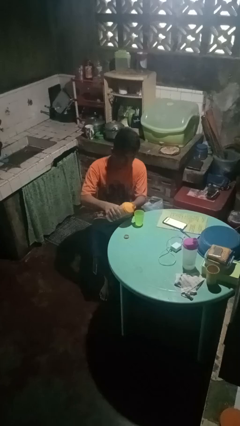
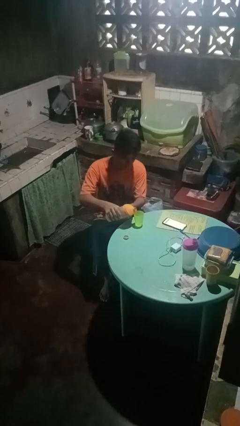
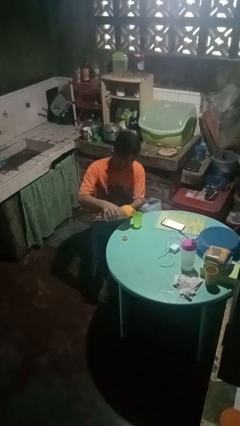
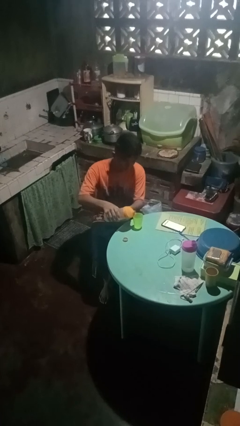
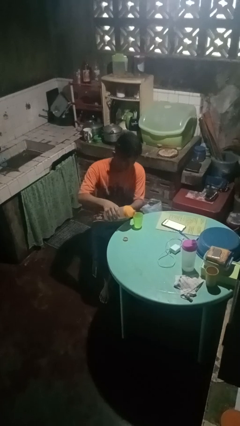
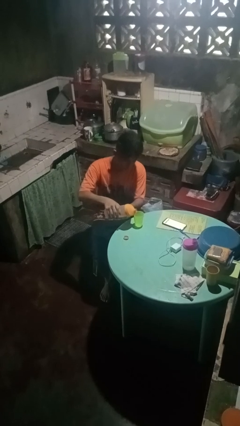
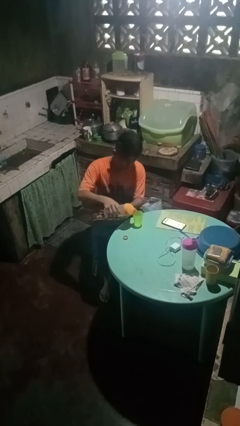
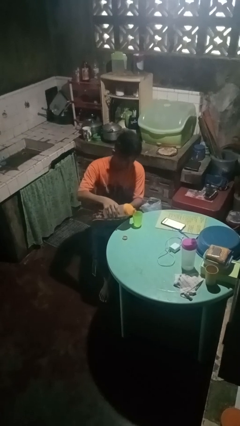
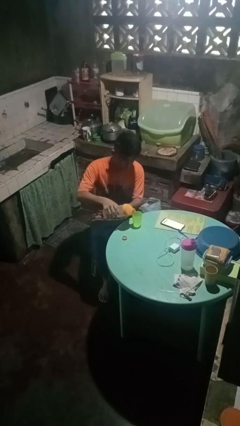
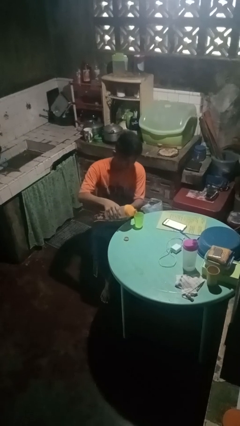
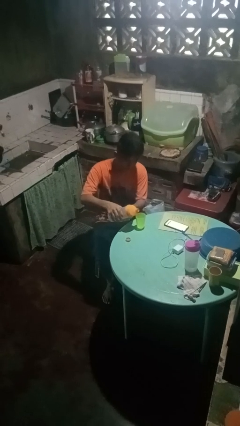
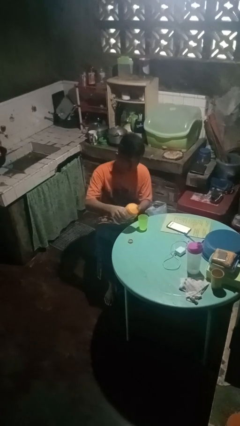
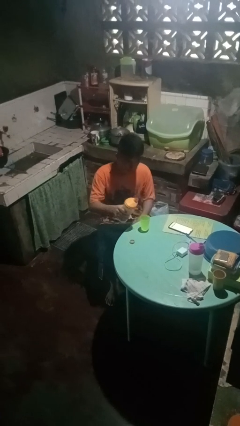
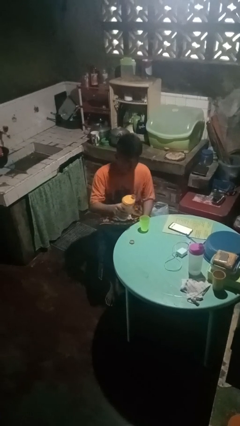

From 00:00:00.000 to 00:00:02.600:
person pours liquid into cup

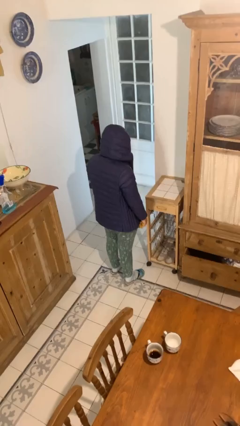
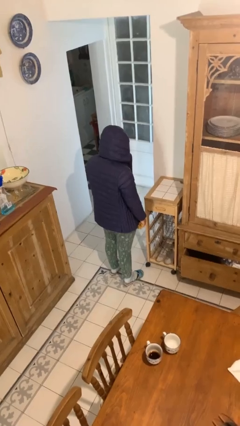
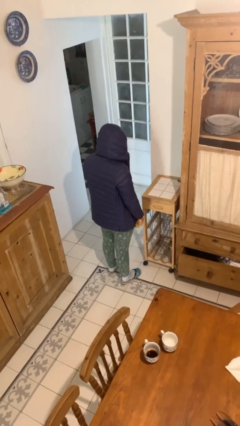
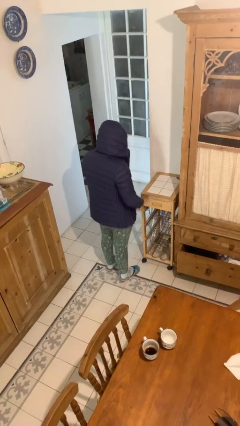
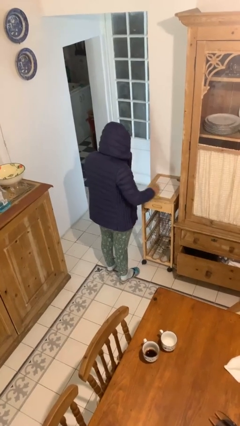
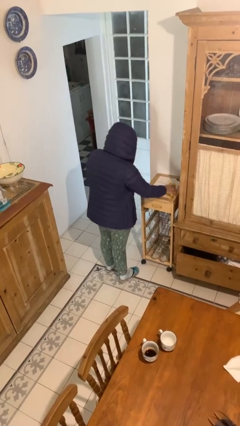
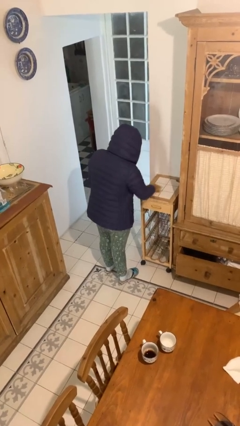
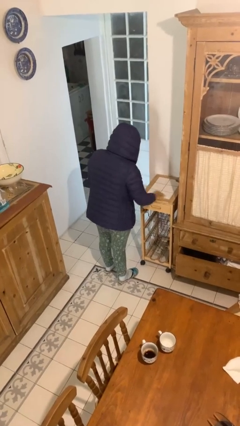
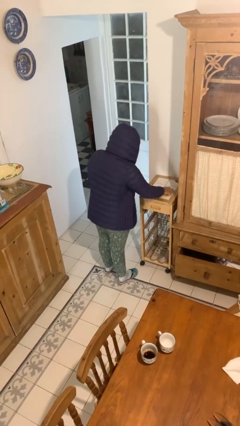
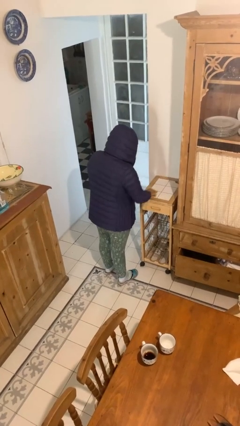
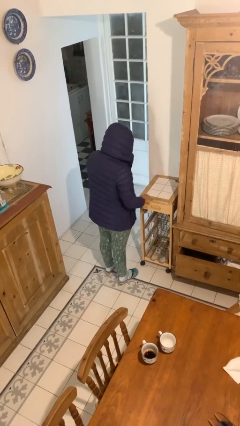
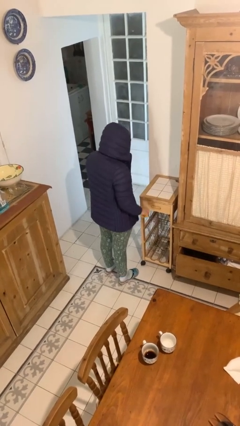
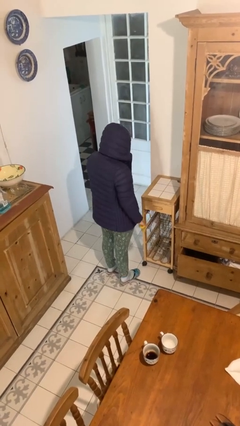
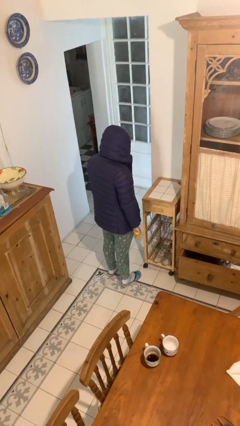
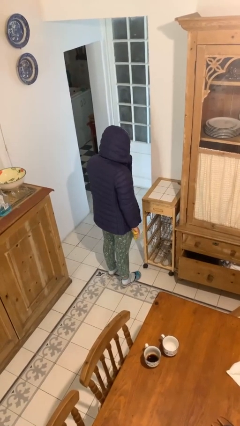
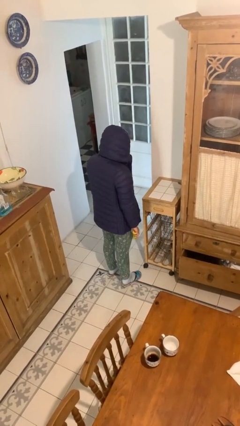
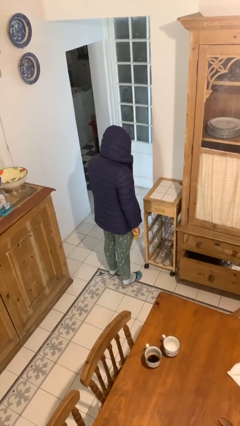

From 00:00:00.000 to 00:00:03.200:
person cleans table with rag

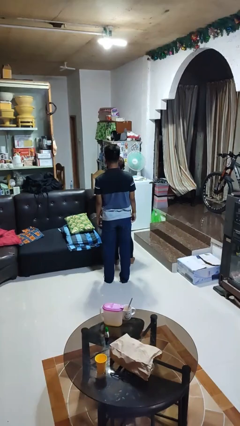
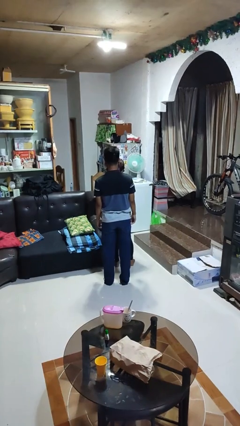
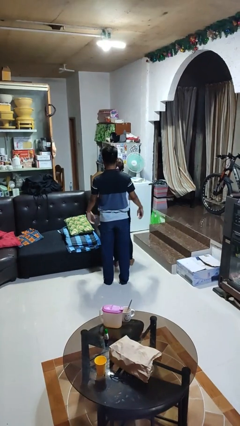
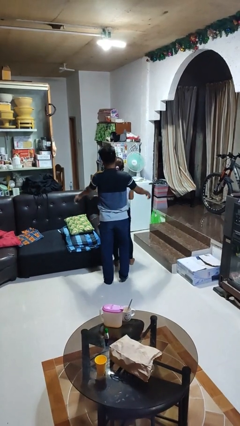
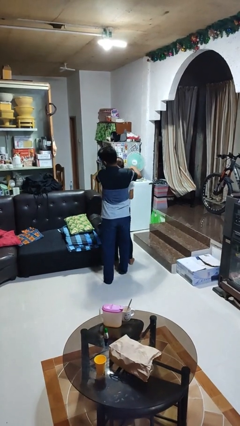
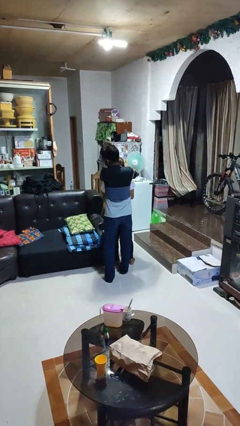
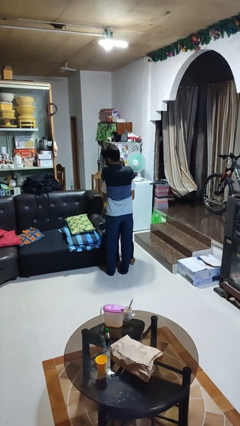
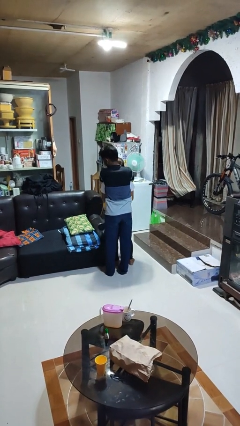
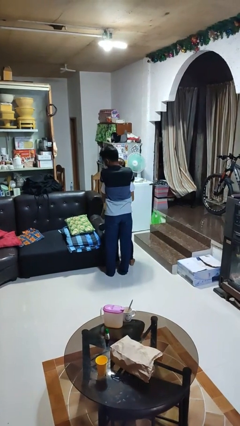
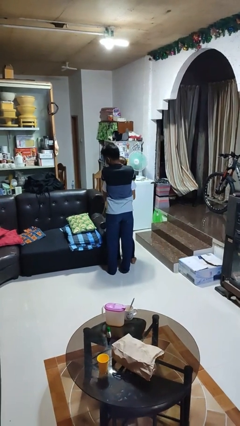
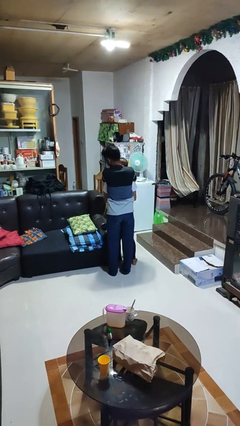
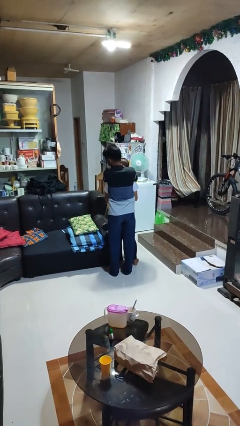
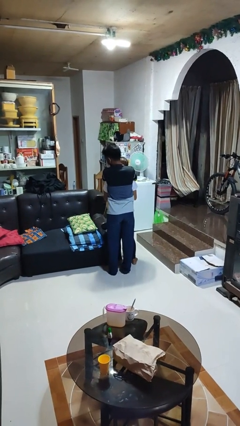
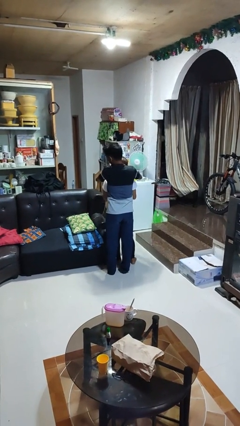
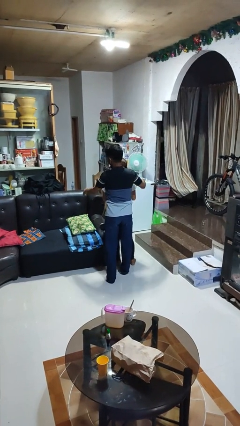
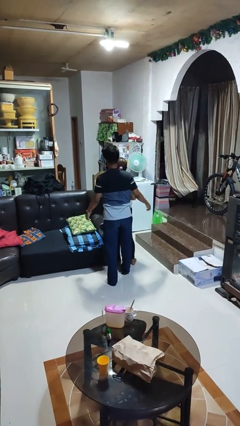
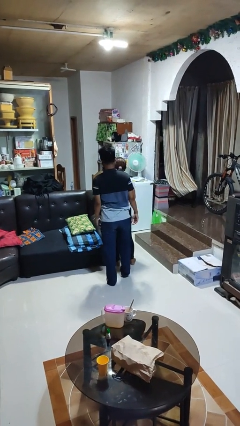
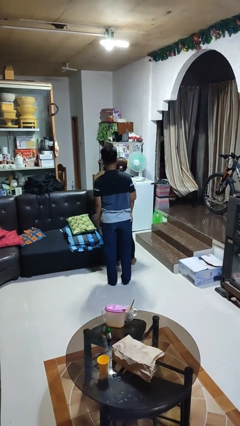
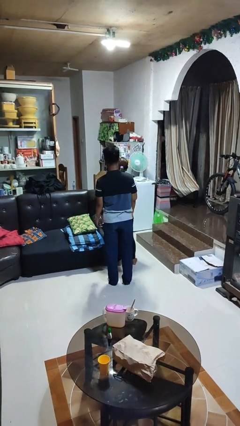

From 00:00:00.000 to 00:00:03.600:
person hugs person from behind

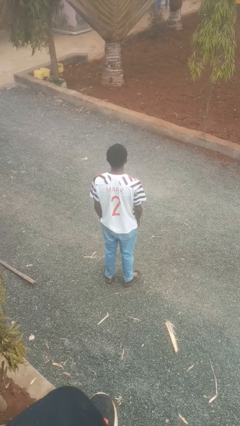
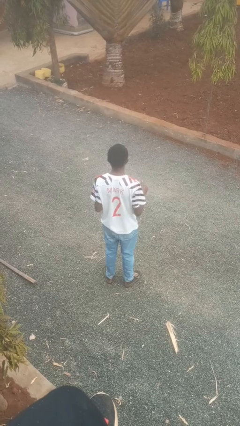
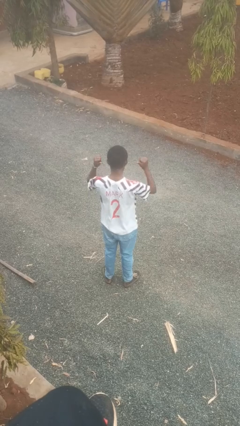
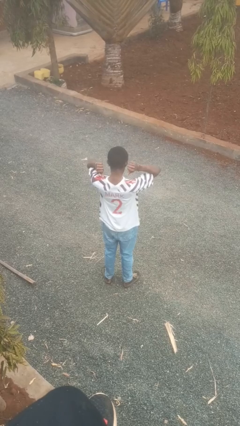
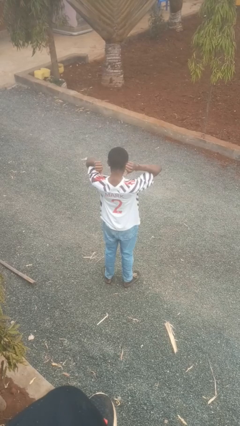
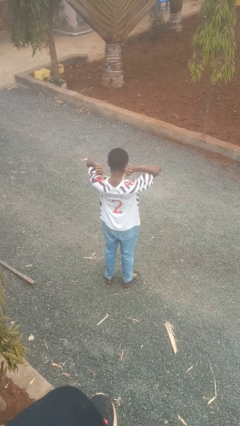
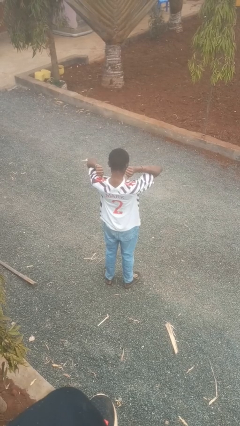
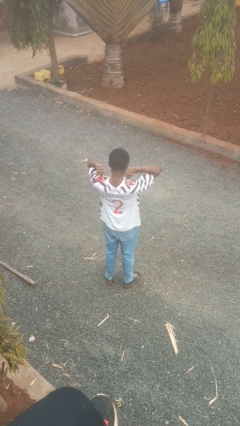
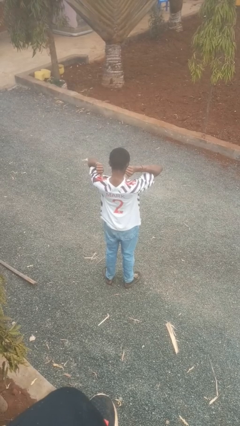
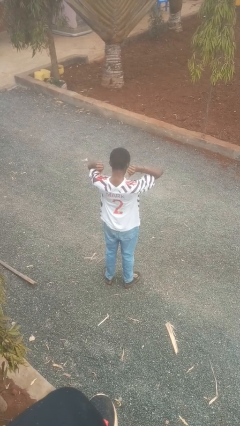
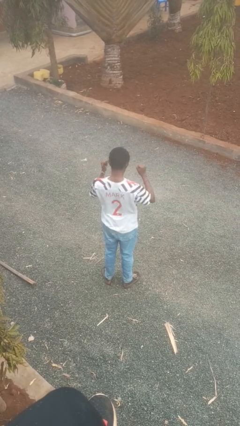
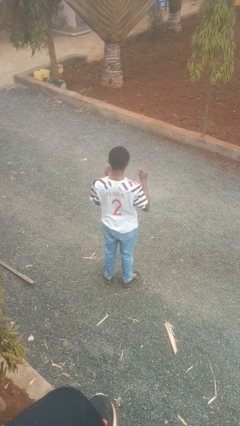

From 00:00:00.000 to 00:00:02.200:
person gestures behind me

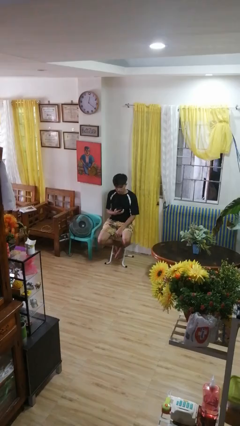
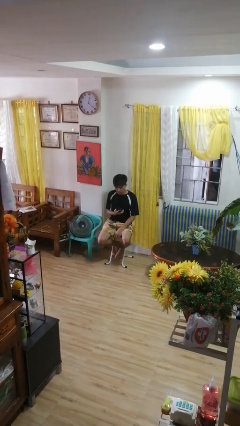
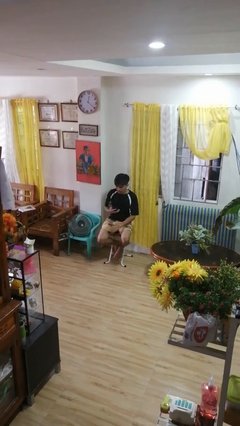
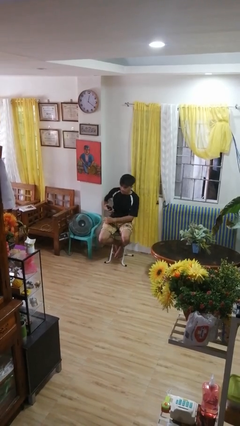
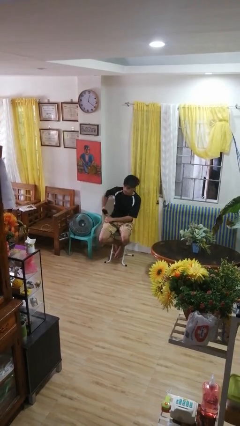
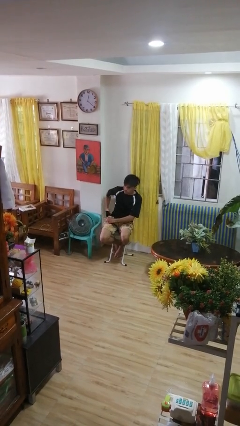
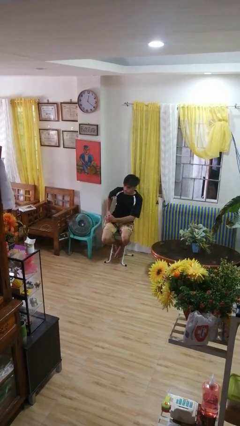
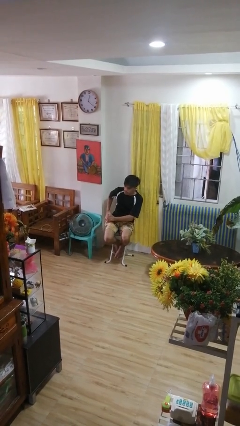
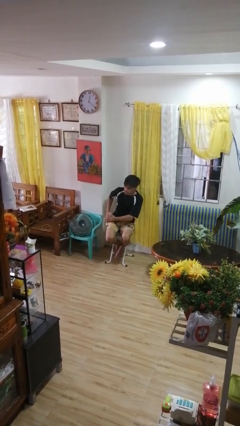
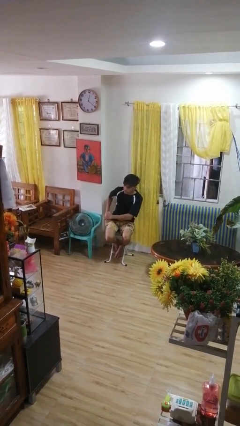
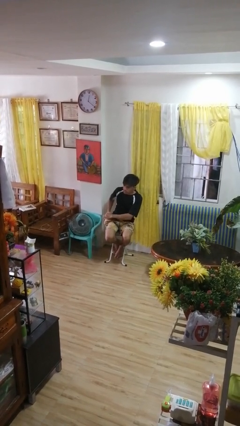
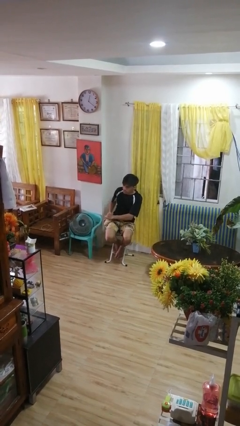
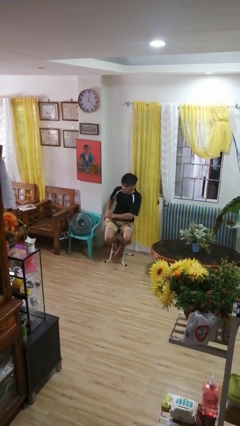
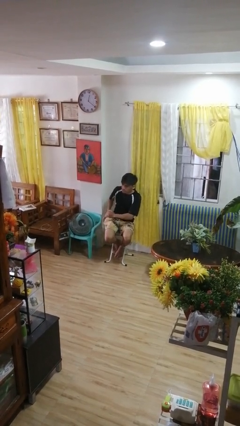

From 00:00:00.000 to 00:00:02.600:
person puts phone into pocket

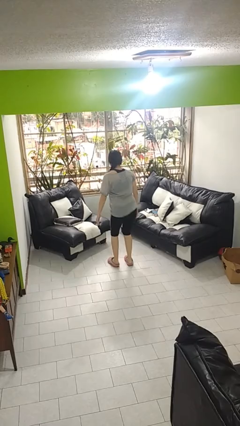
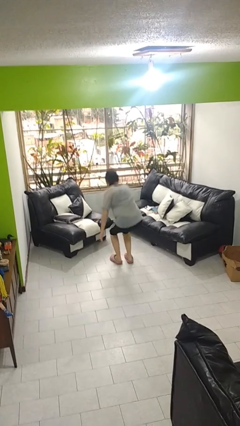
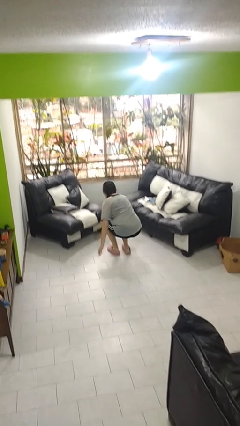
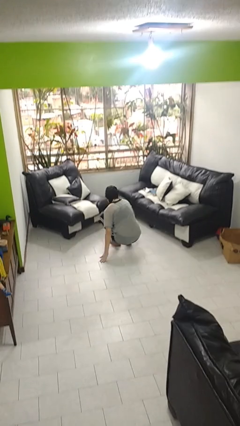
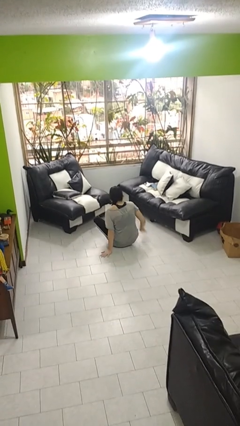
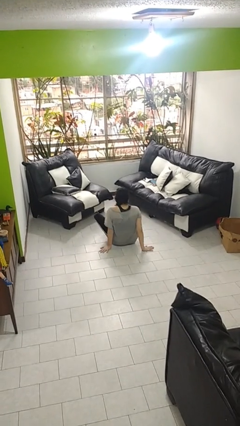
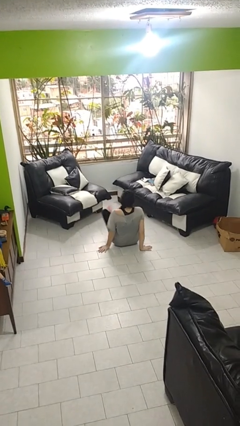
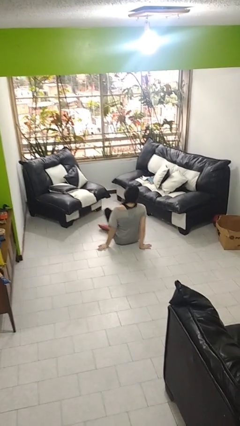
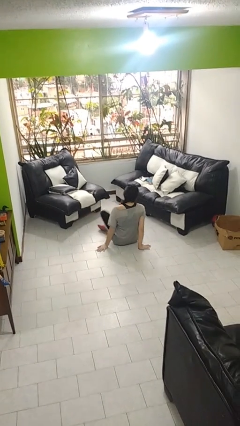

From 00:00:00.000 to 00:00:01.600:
person sits crisscross

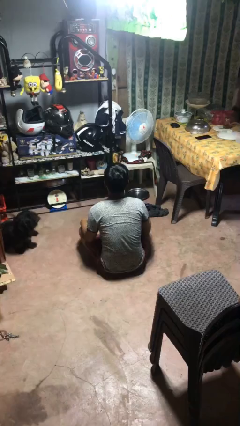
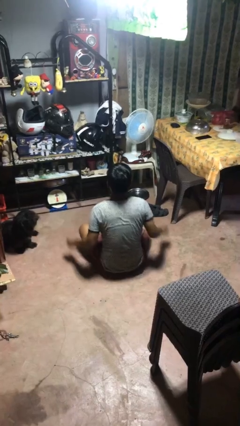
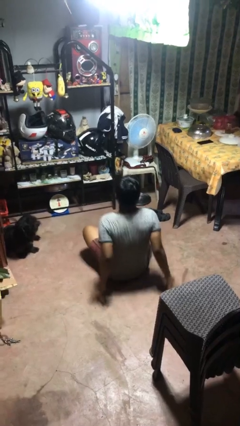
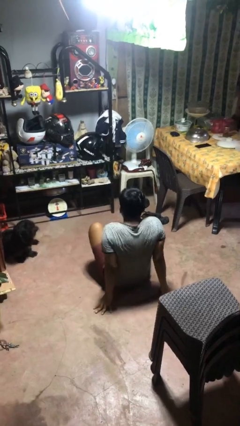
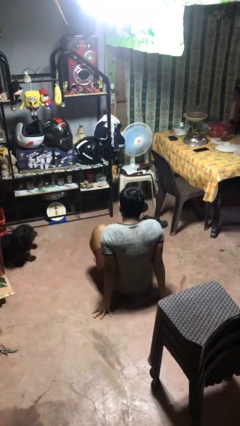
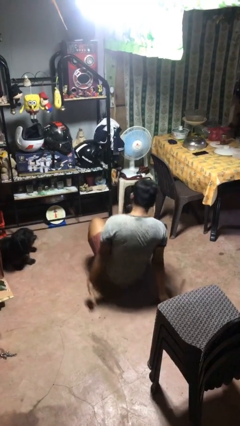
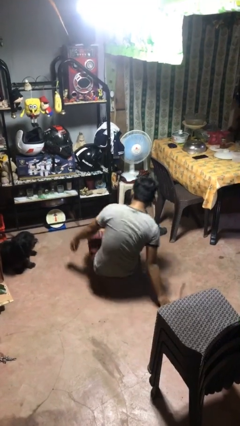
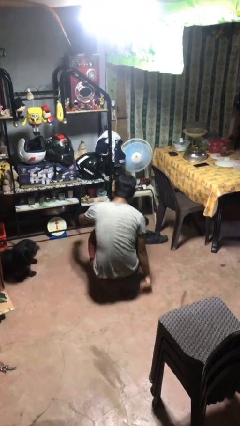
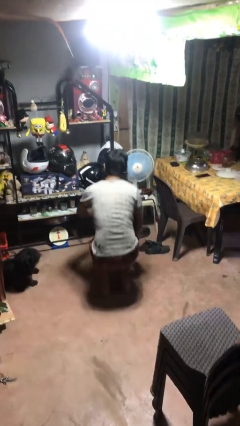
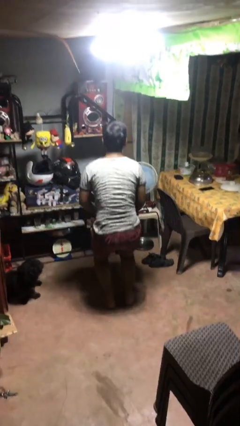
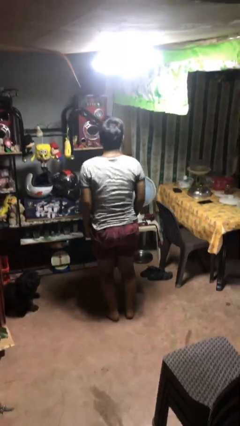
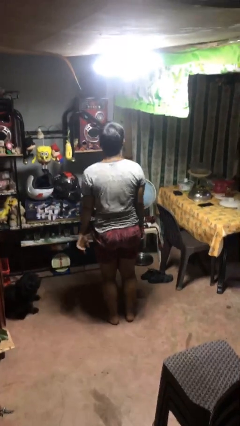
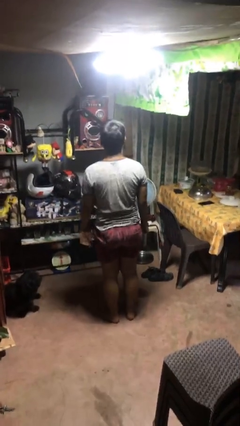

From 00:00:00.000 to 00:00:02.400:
person stands up from floor
